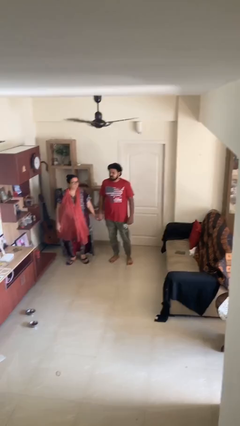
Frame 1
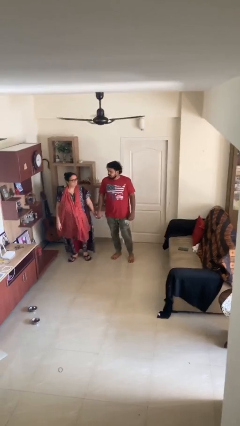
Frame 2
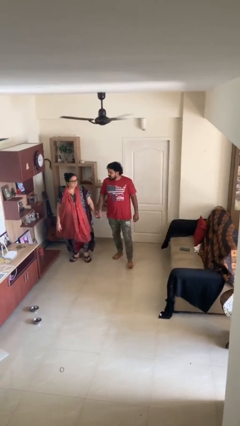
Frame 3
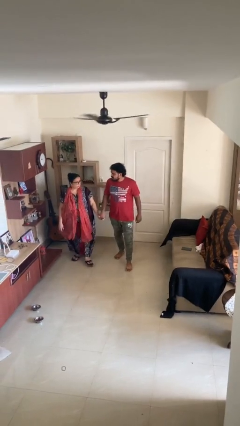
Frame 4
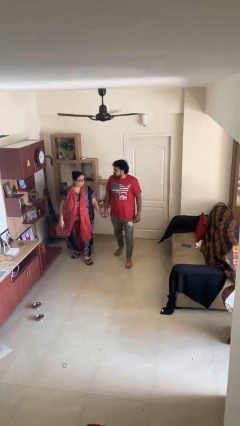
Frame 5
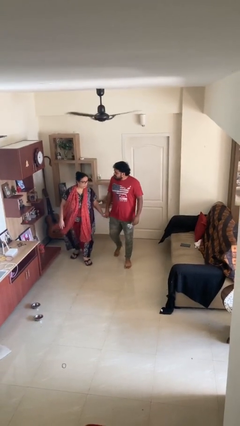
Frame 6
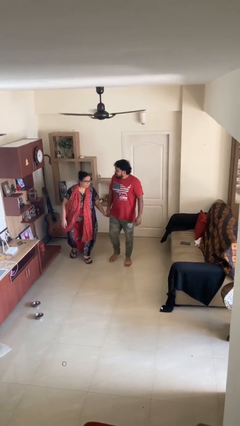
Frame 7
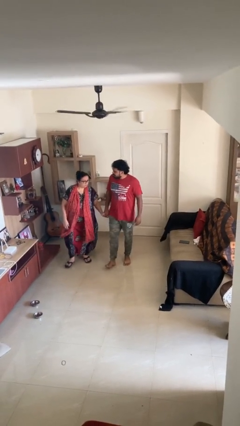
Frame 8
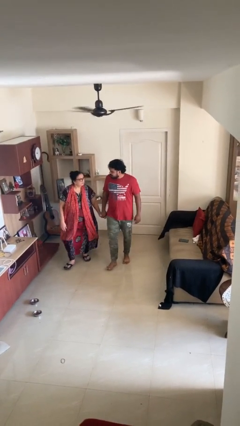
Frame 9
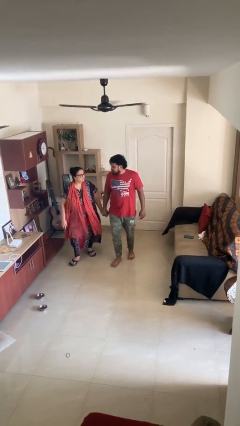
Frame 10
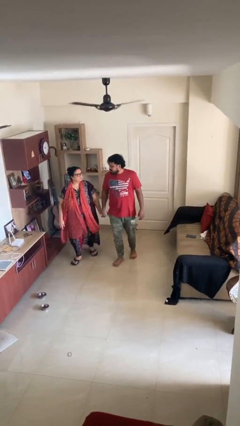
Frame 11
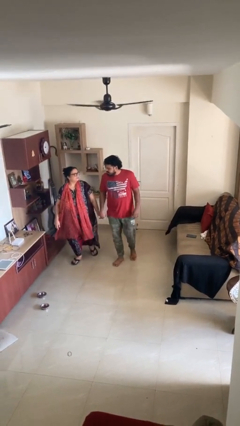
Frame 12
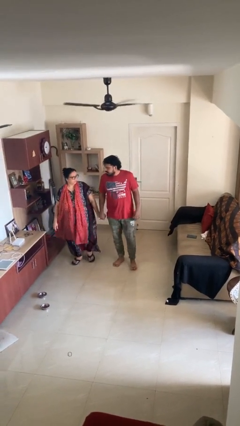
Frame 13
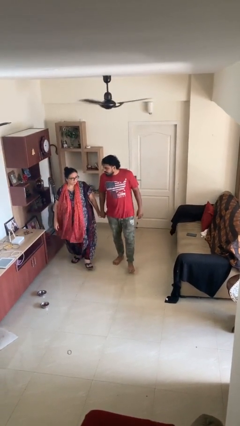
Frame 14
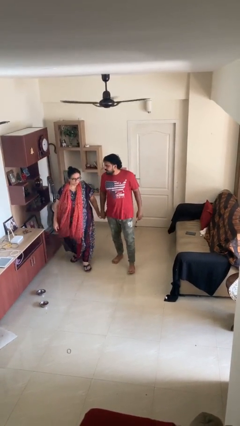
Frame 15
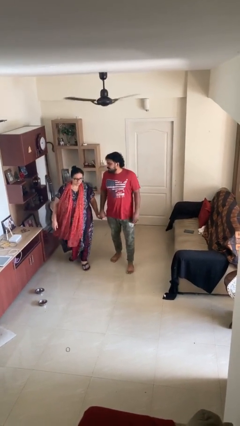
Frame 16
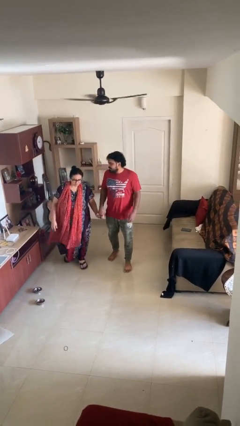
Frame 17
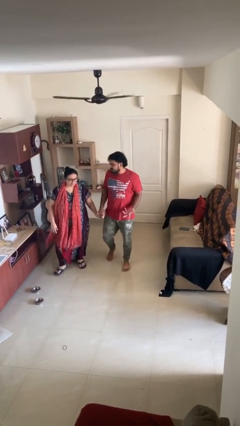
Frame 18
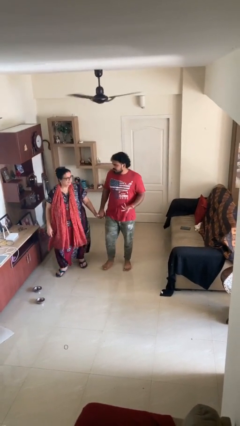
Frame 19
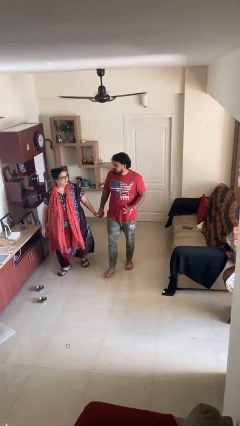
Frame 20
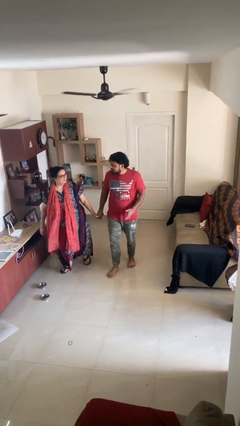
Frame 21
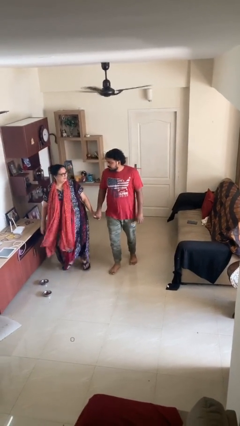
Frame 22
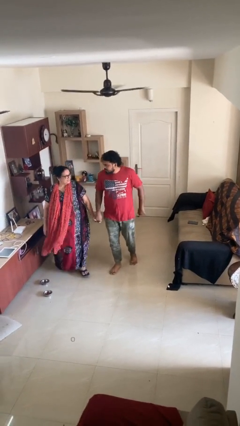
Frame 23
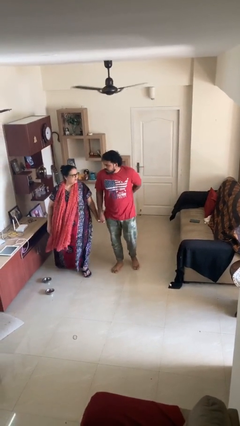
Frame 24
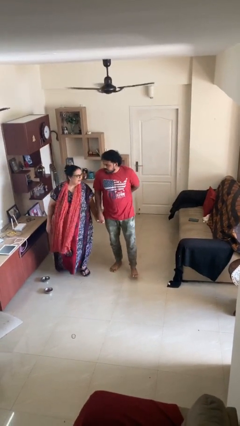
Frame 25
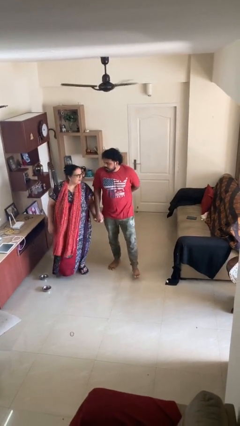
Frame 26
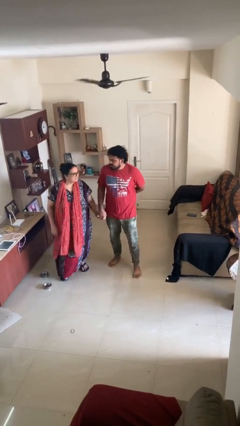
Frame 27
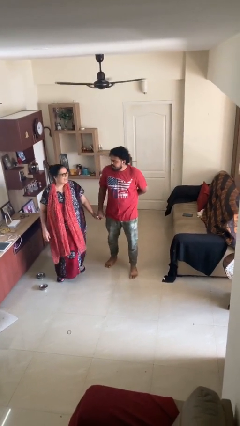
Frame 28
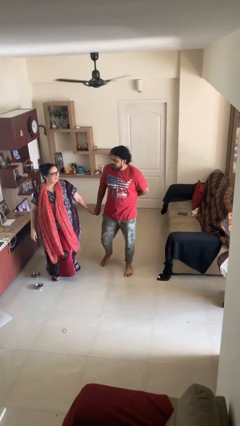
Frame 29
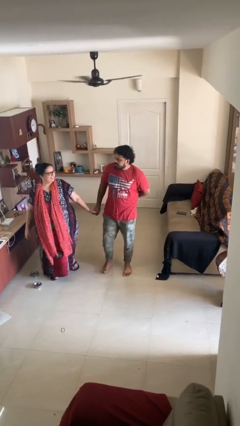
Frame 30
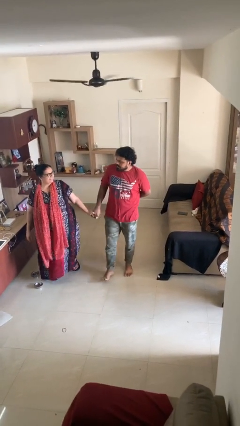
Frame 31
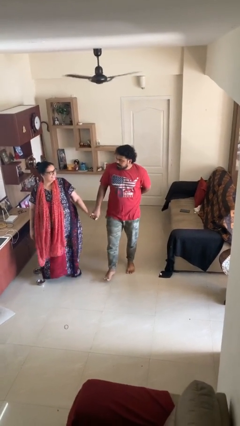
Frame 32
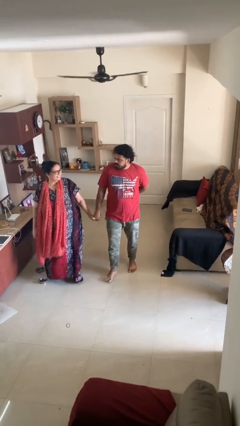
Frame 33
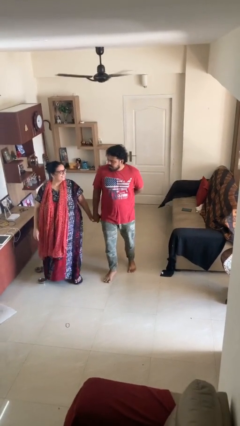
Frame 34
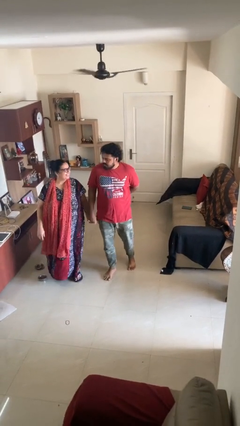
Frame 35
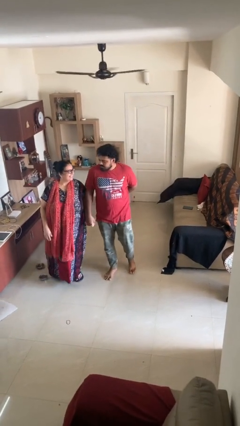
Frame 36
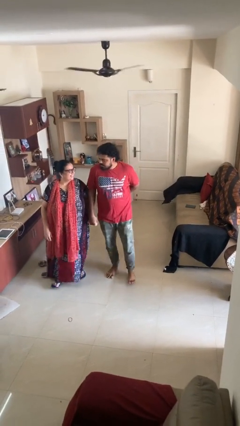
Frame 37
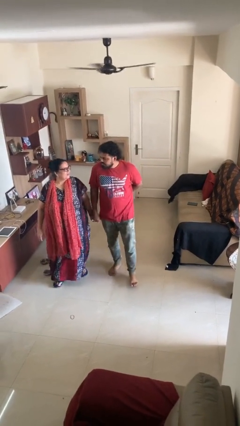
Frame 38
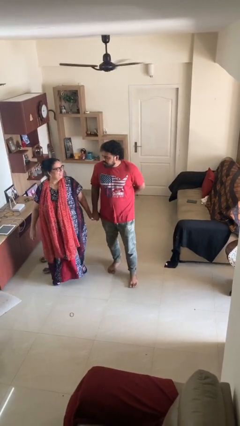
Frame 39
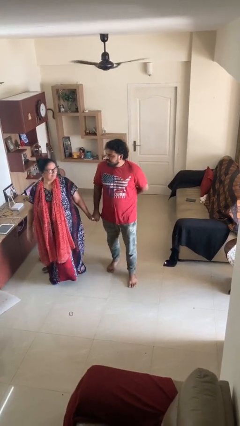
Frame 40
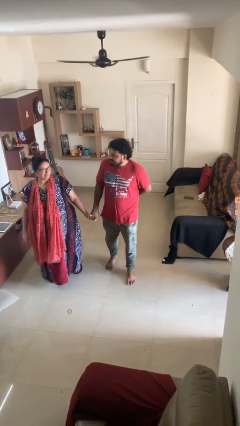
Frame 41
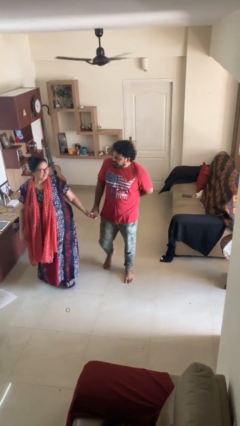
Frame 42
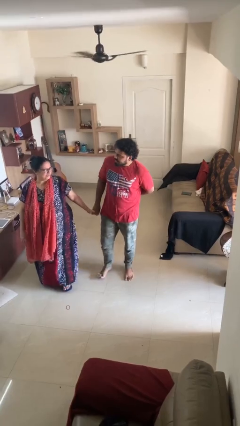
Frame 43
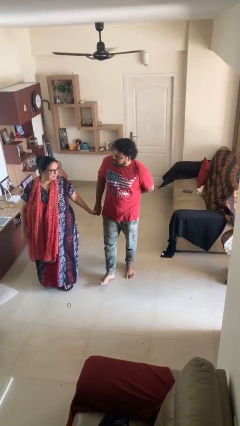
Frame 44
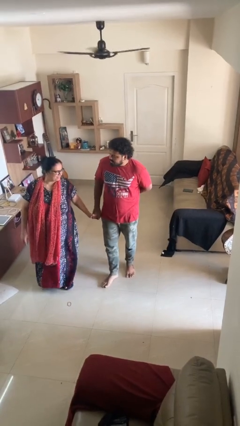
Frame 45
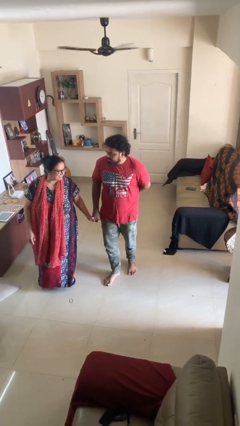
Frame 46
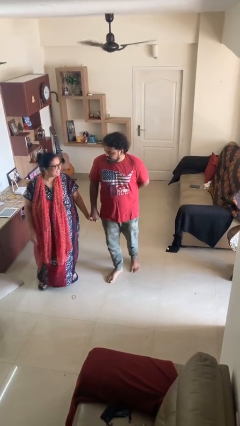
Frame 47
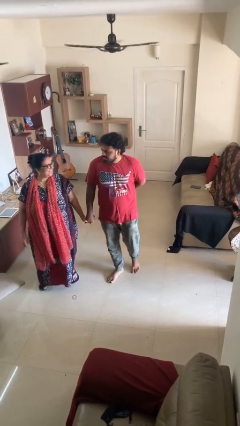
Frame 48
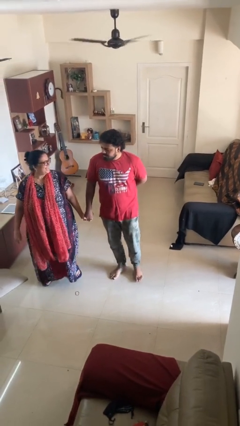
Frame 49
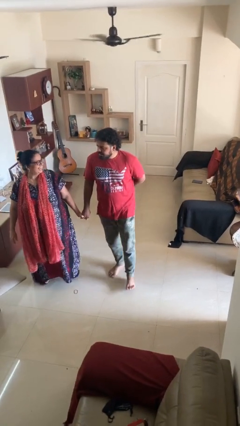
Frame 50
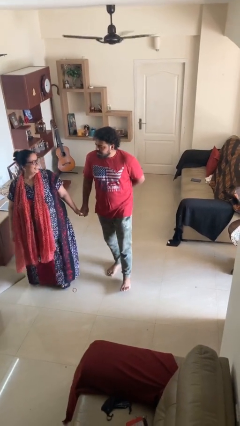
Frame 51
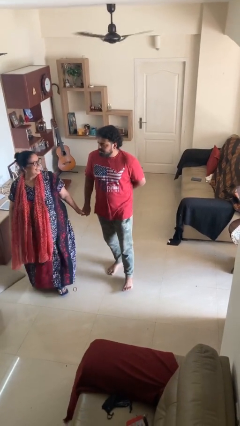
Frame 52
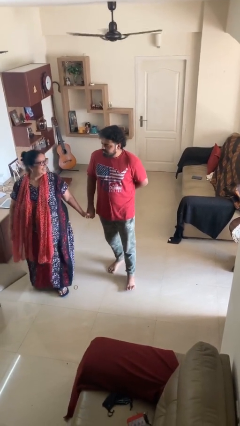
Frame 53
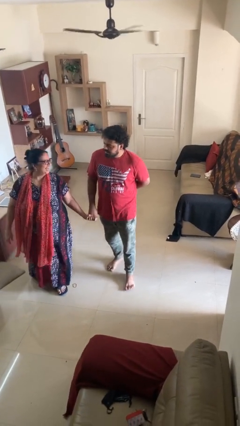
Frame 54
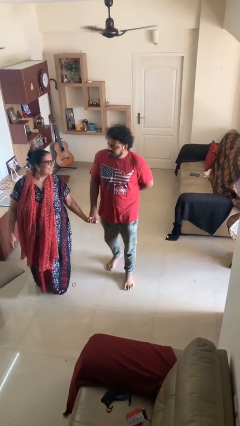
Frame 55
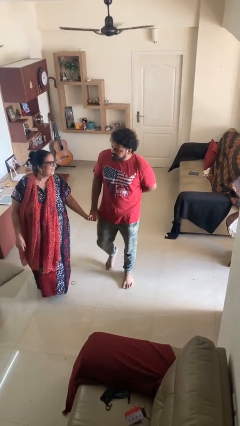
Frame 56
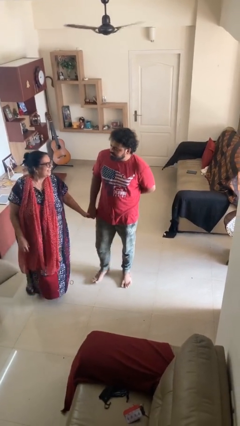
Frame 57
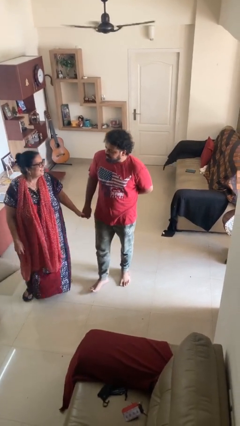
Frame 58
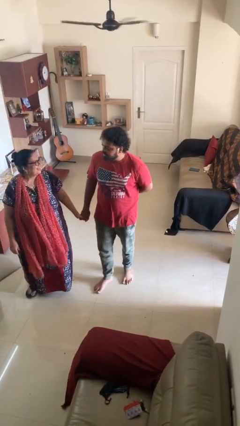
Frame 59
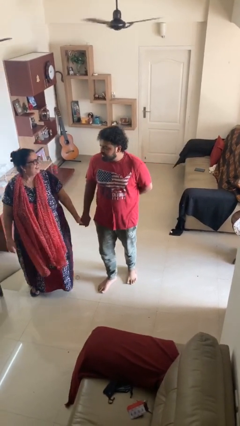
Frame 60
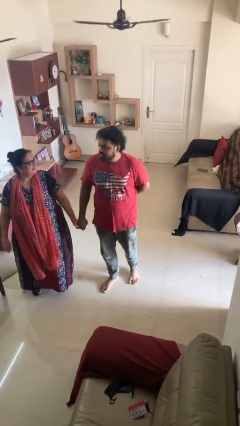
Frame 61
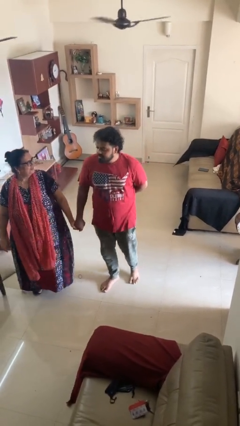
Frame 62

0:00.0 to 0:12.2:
person holds hand

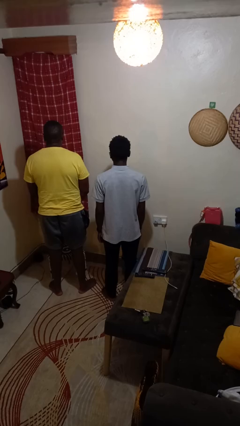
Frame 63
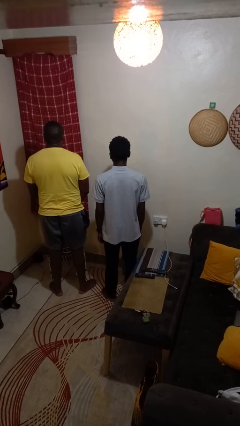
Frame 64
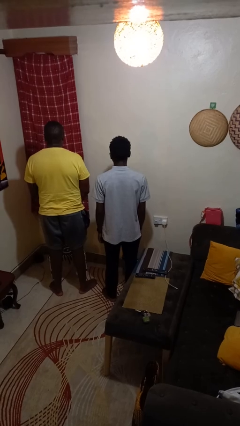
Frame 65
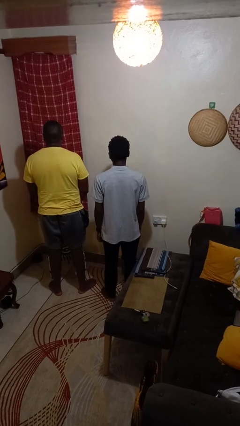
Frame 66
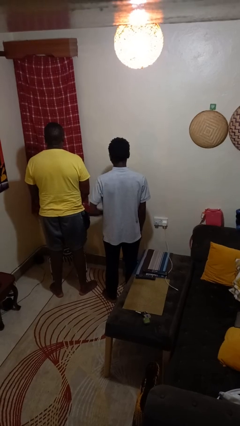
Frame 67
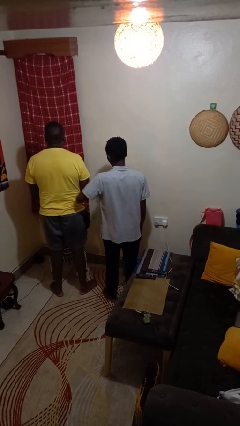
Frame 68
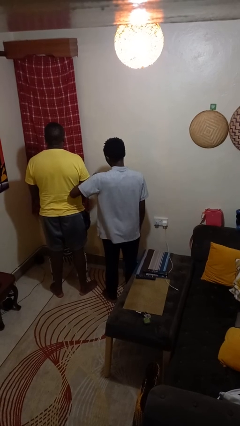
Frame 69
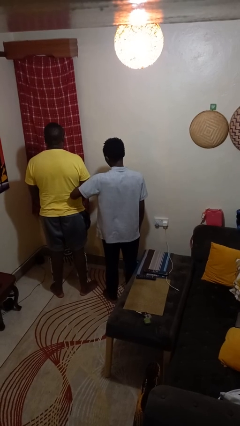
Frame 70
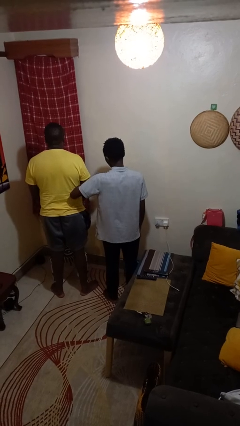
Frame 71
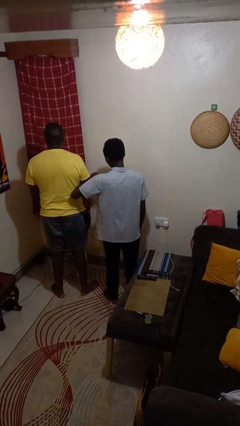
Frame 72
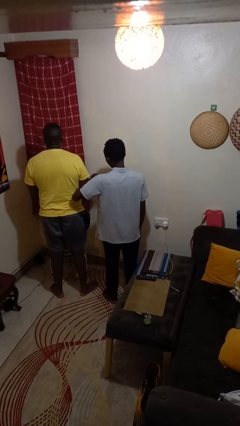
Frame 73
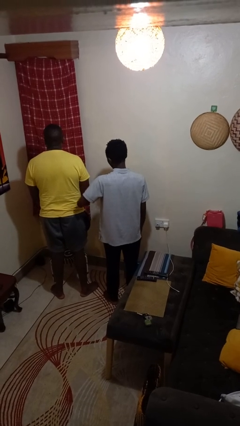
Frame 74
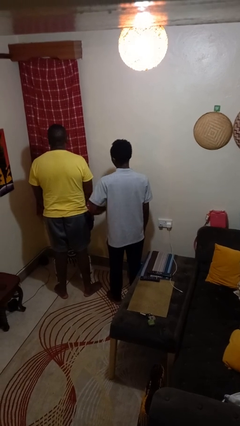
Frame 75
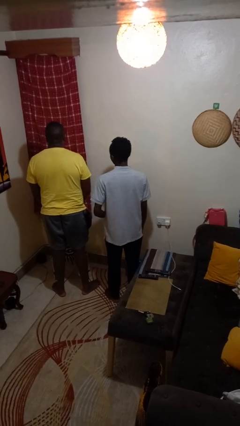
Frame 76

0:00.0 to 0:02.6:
person nudges person with elbow

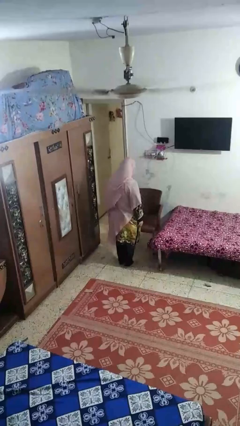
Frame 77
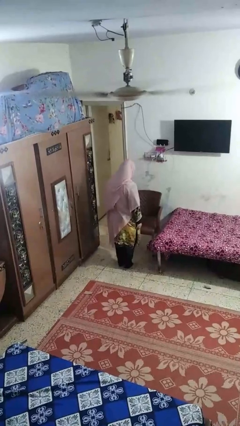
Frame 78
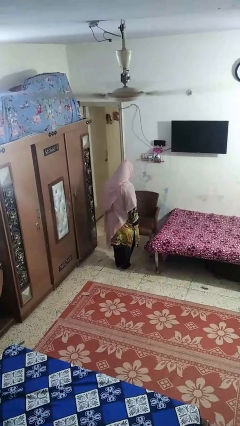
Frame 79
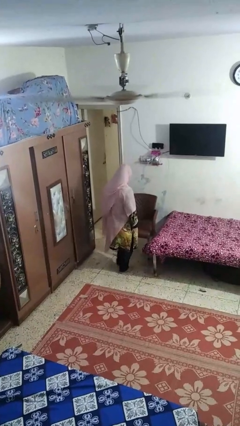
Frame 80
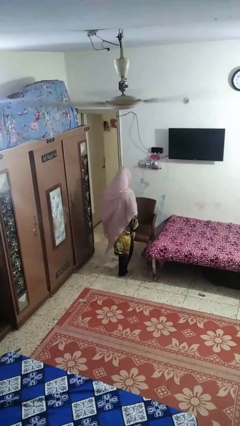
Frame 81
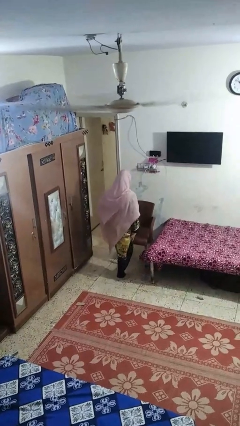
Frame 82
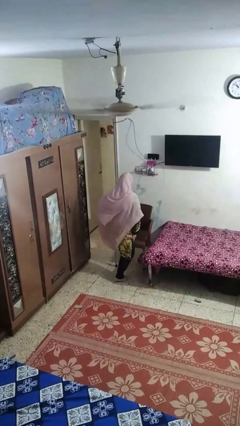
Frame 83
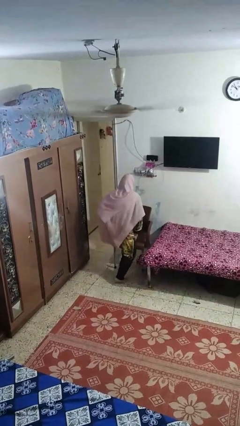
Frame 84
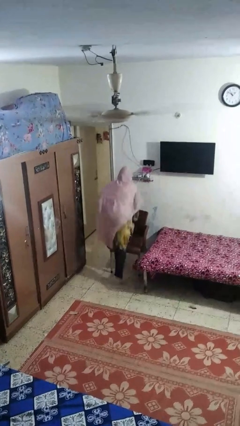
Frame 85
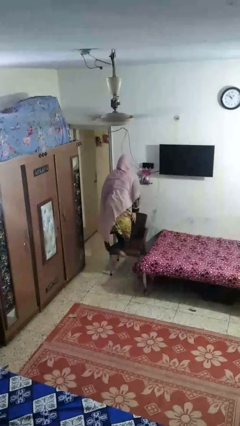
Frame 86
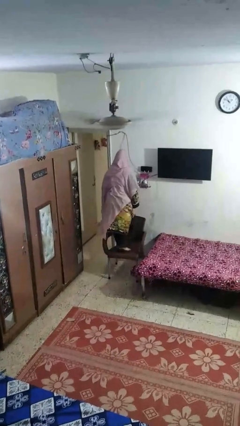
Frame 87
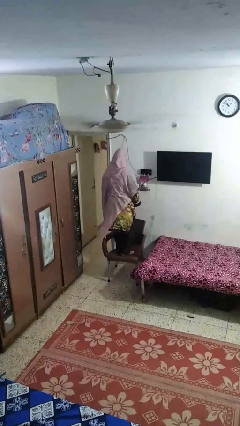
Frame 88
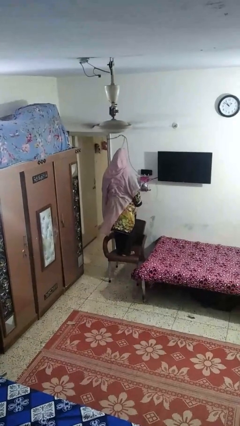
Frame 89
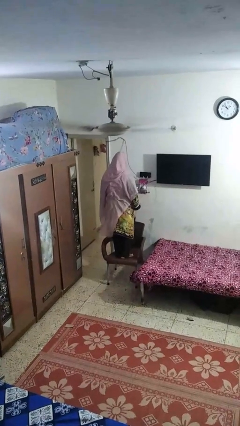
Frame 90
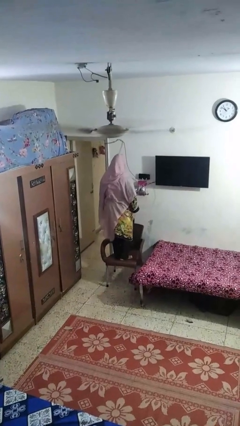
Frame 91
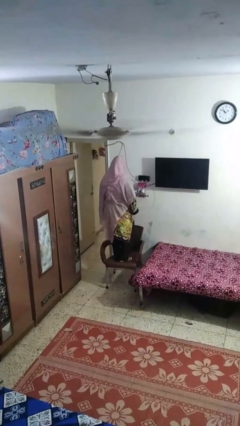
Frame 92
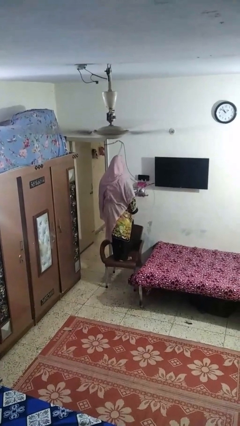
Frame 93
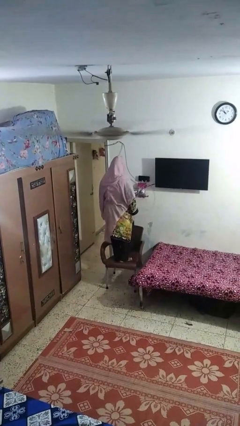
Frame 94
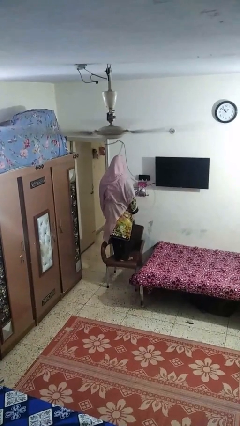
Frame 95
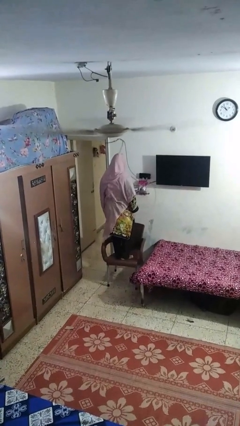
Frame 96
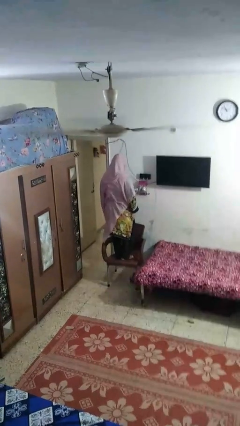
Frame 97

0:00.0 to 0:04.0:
person climbs on chair
